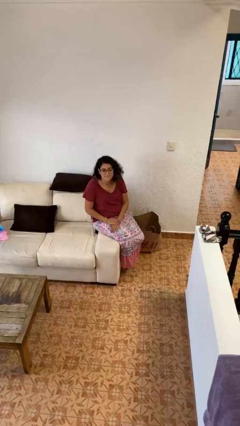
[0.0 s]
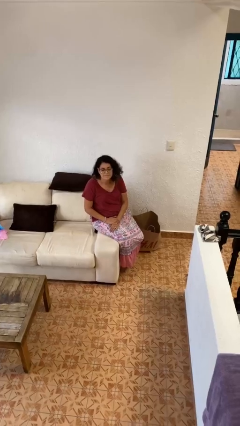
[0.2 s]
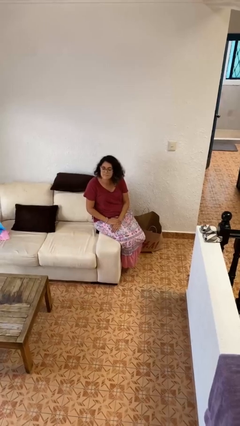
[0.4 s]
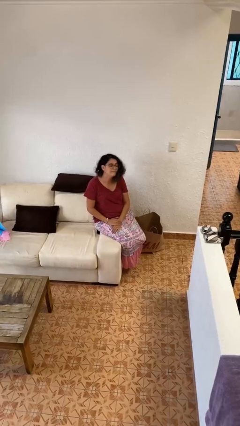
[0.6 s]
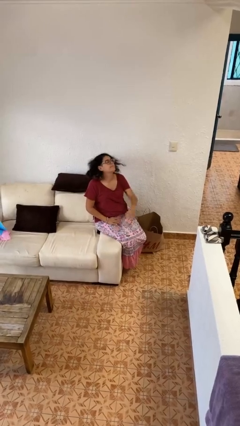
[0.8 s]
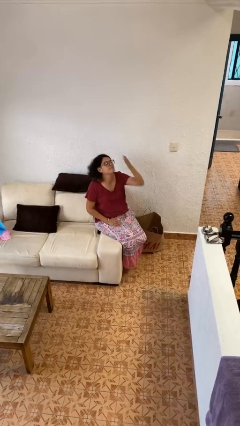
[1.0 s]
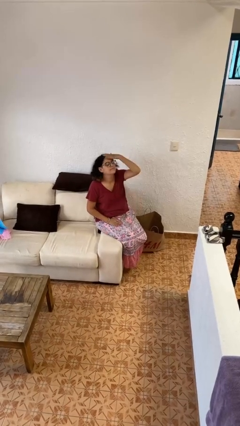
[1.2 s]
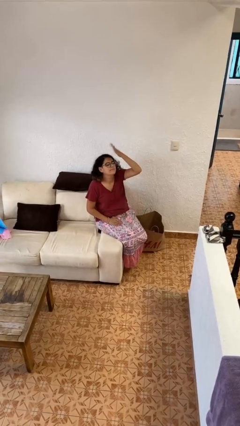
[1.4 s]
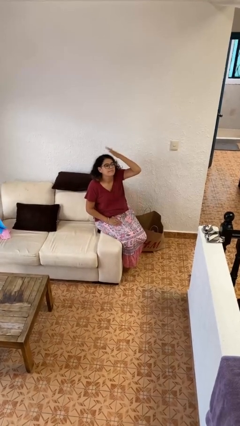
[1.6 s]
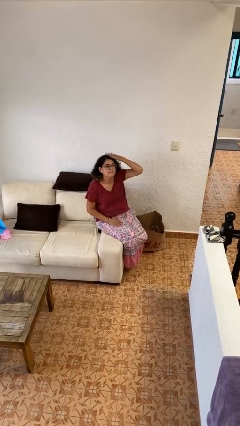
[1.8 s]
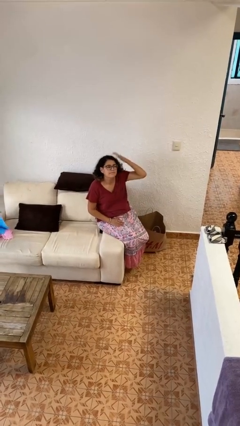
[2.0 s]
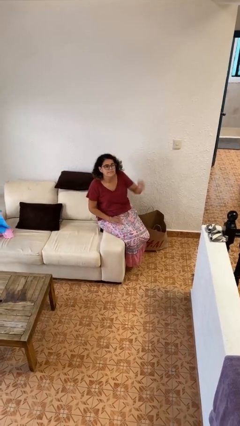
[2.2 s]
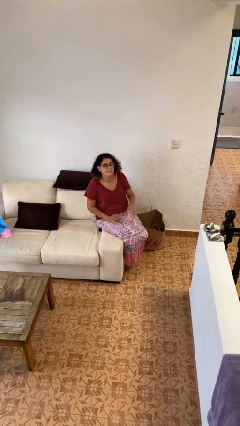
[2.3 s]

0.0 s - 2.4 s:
person pats head

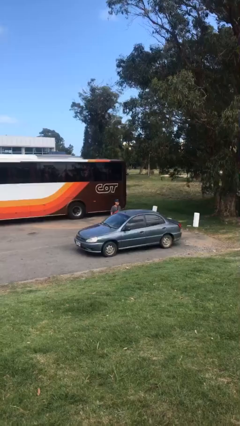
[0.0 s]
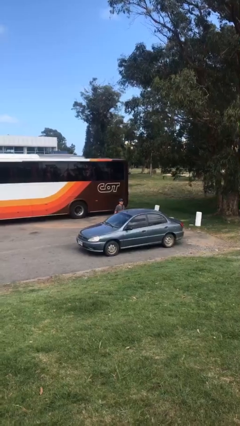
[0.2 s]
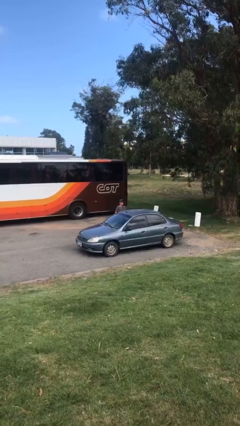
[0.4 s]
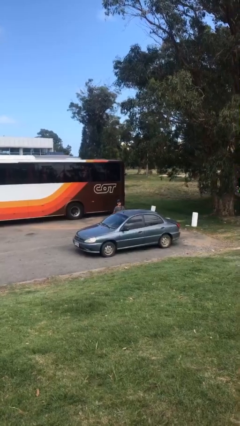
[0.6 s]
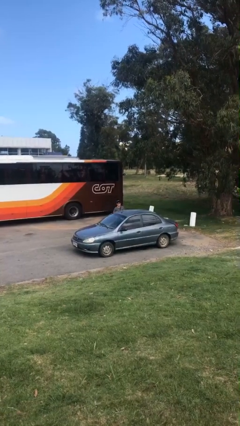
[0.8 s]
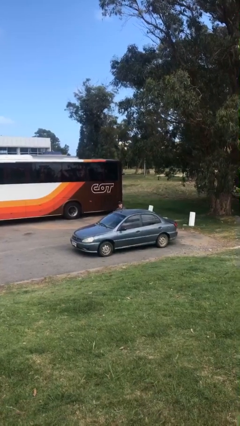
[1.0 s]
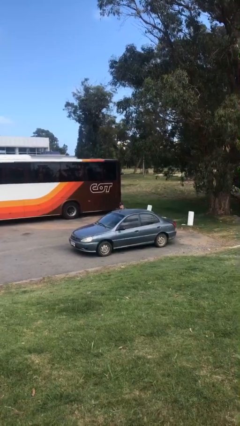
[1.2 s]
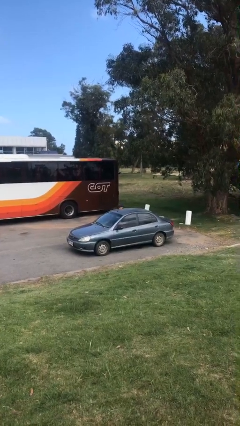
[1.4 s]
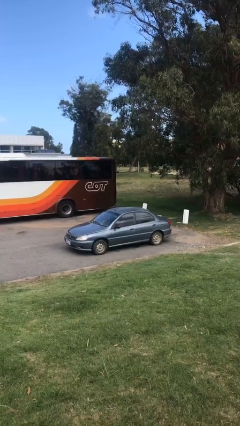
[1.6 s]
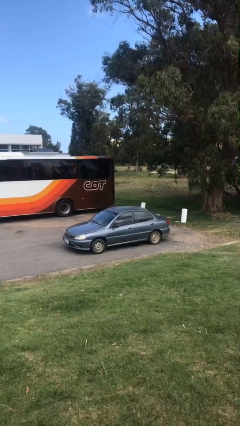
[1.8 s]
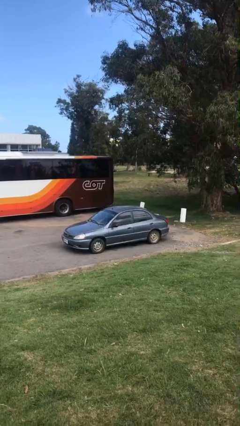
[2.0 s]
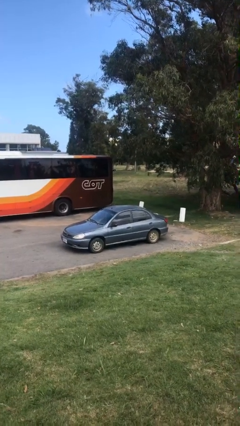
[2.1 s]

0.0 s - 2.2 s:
person enters car

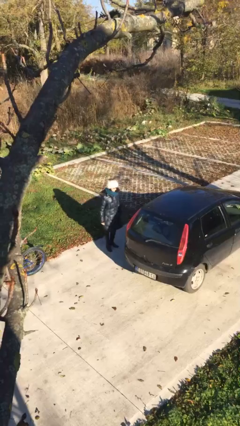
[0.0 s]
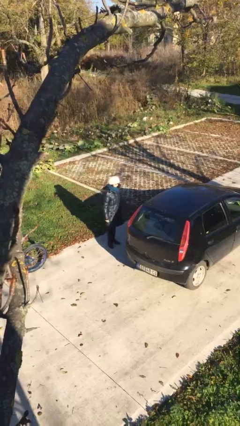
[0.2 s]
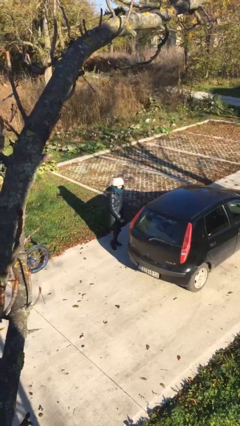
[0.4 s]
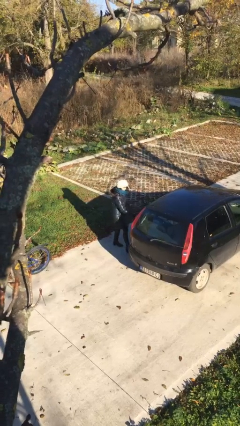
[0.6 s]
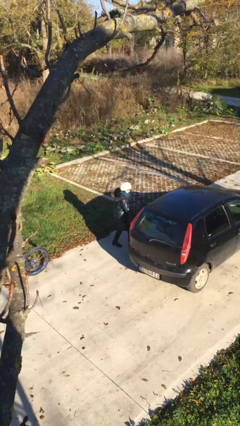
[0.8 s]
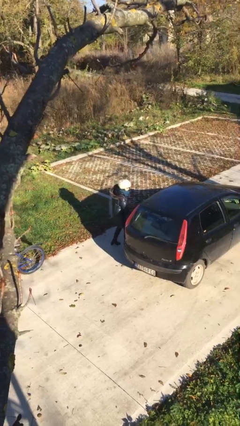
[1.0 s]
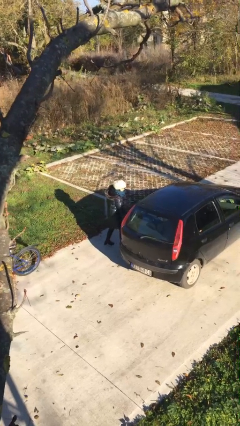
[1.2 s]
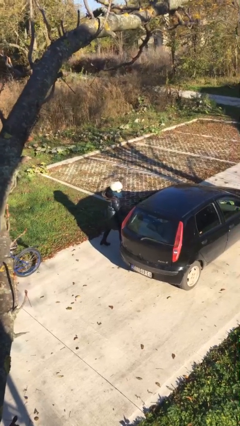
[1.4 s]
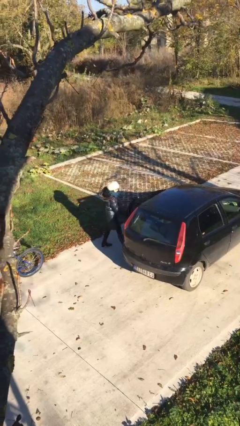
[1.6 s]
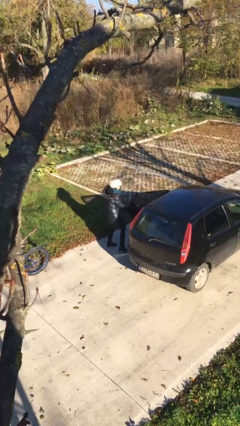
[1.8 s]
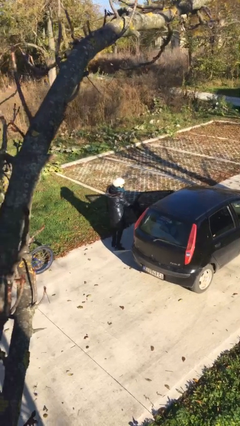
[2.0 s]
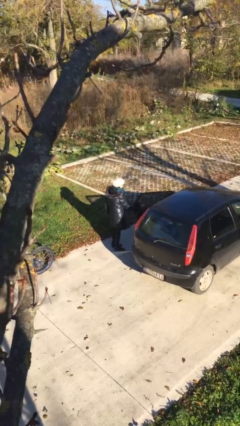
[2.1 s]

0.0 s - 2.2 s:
person opens car door

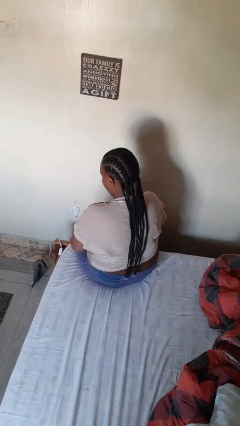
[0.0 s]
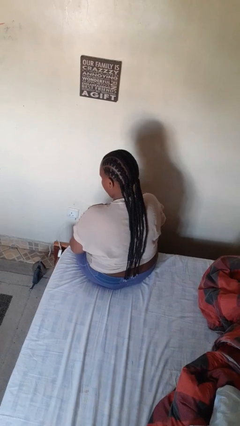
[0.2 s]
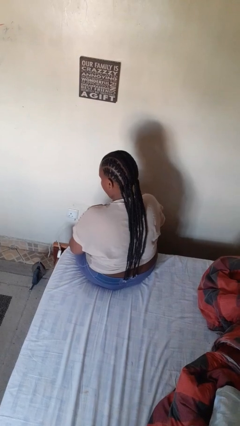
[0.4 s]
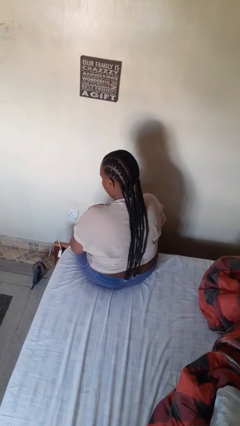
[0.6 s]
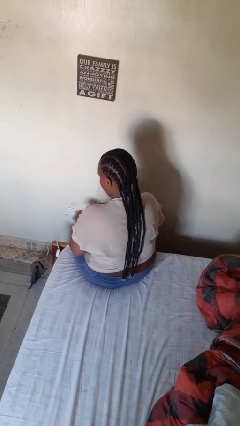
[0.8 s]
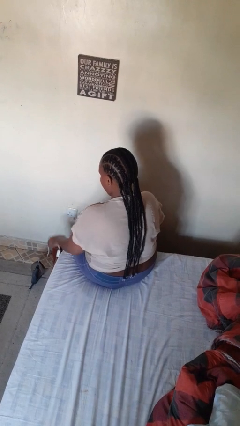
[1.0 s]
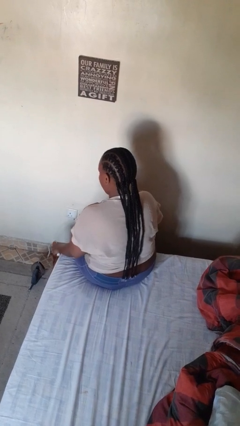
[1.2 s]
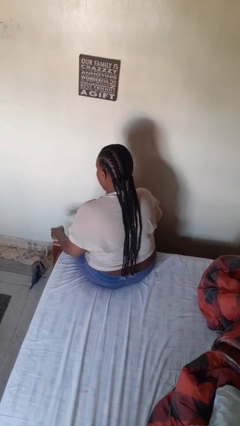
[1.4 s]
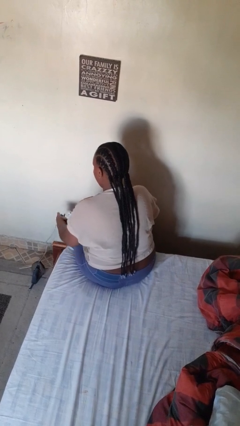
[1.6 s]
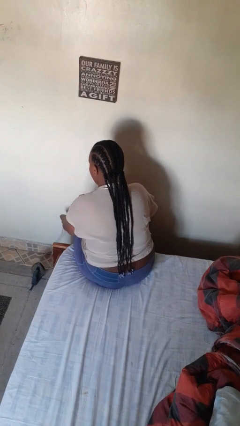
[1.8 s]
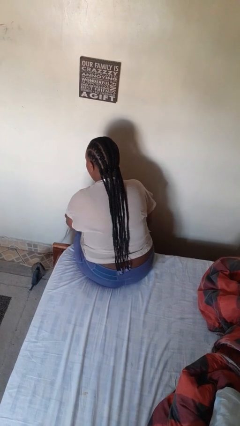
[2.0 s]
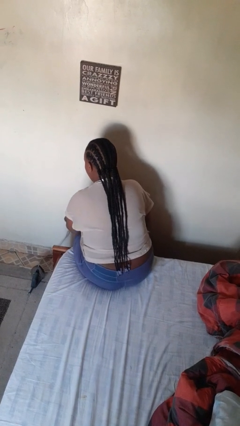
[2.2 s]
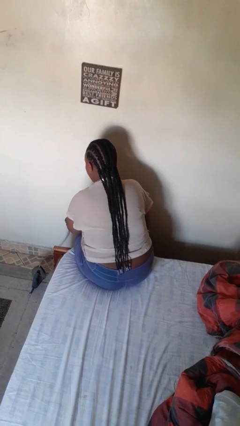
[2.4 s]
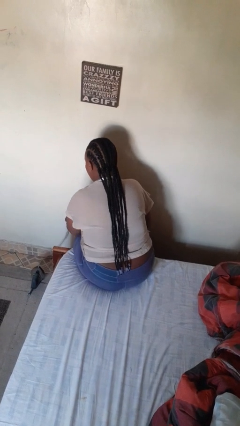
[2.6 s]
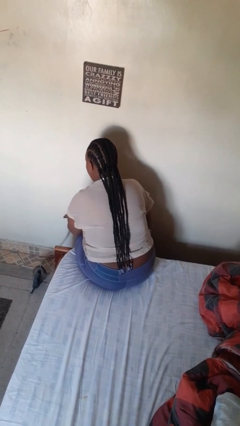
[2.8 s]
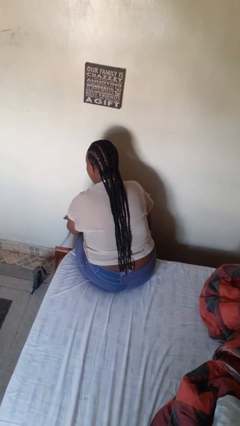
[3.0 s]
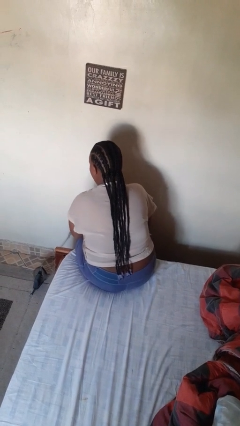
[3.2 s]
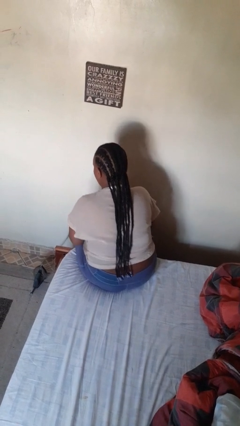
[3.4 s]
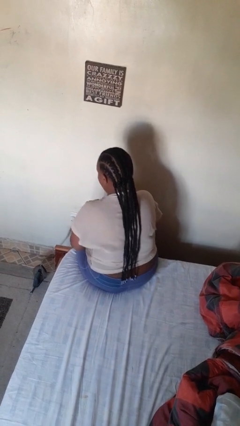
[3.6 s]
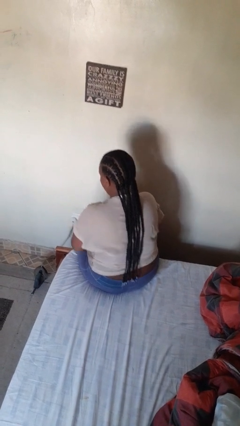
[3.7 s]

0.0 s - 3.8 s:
person plugs into electrical socket

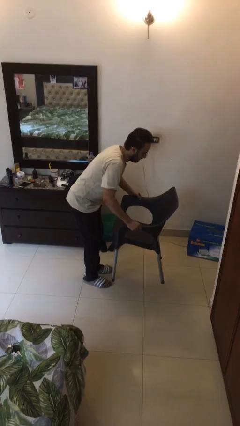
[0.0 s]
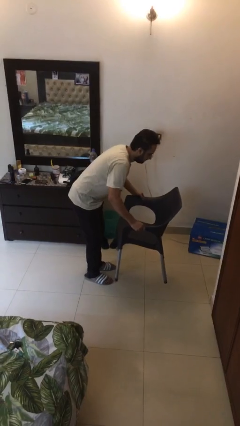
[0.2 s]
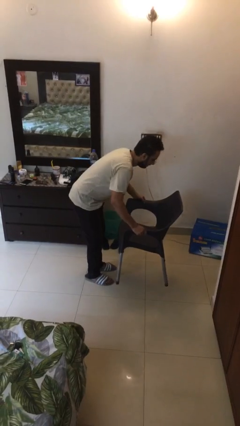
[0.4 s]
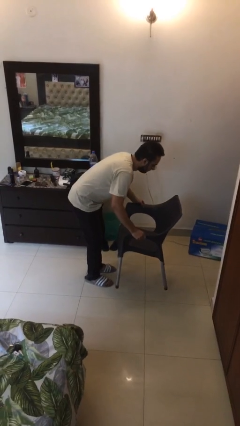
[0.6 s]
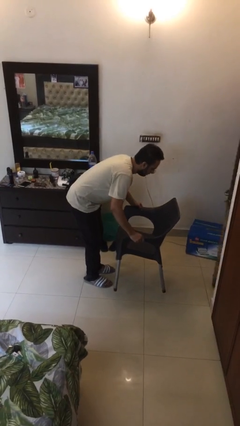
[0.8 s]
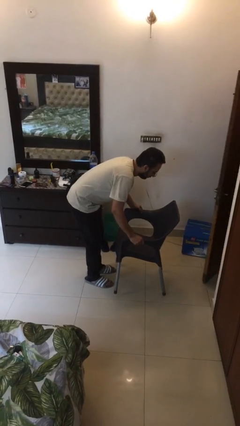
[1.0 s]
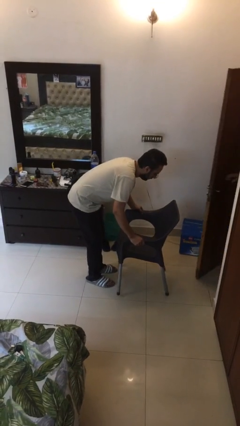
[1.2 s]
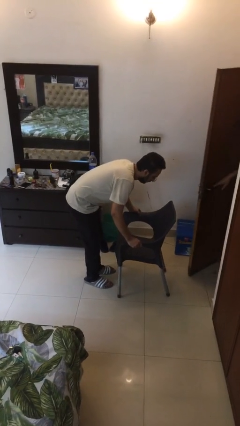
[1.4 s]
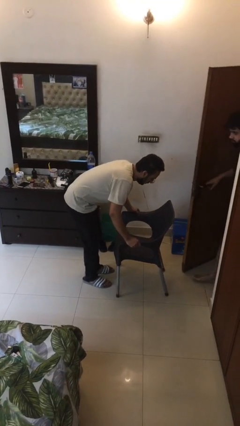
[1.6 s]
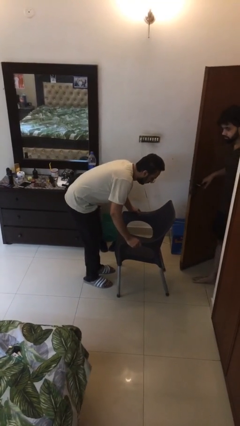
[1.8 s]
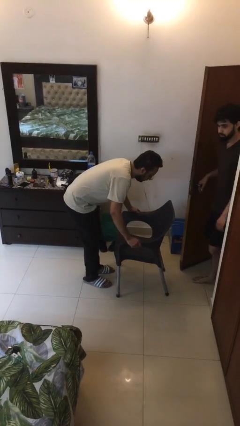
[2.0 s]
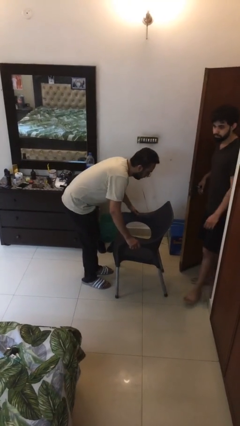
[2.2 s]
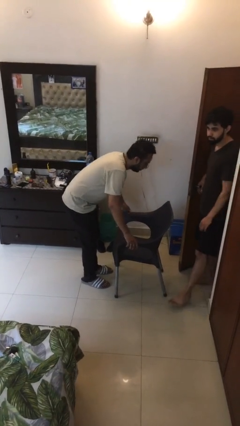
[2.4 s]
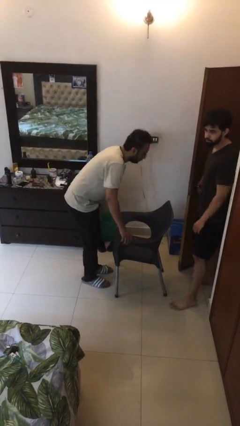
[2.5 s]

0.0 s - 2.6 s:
person puts down object on floor

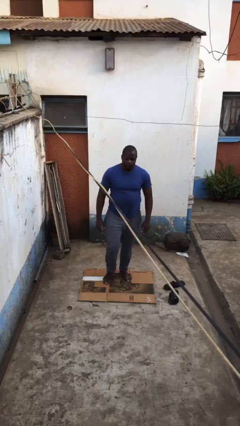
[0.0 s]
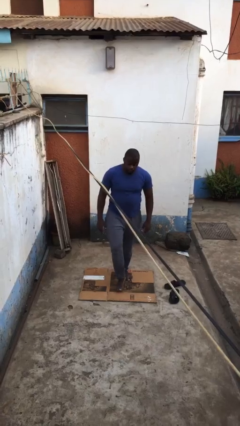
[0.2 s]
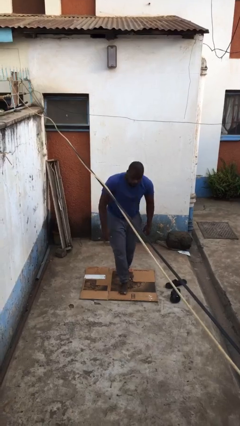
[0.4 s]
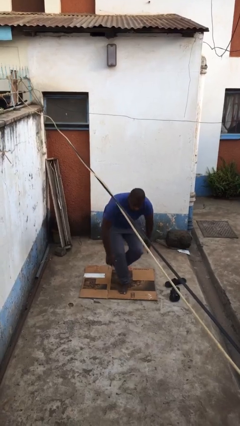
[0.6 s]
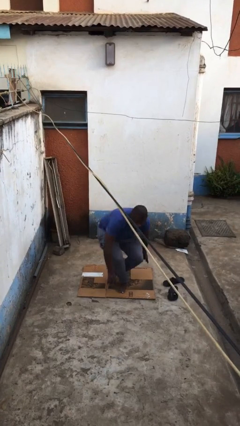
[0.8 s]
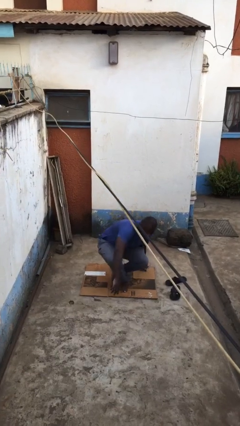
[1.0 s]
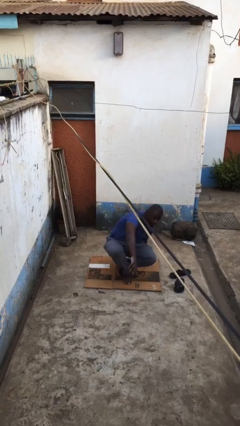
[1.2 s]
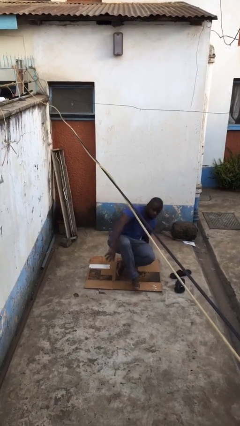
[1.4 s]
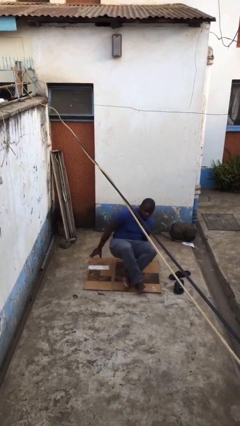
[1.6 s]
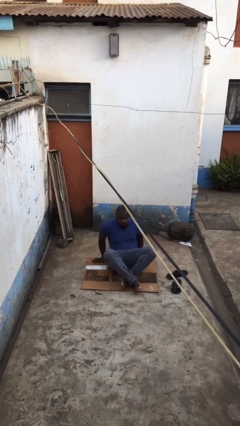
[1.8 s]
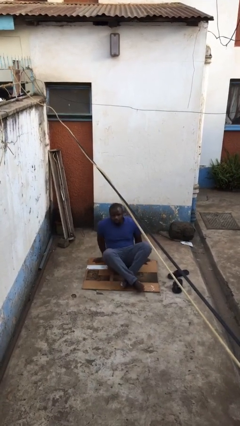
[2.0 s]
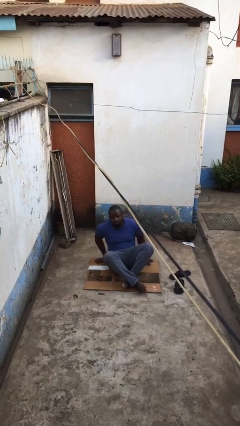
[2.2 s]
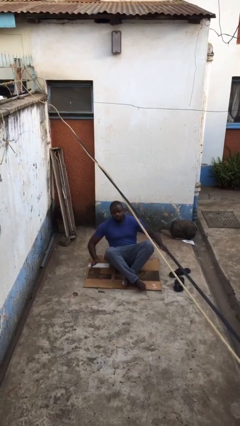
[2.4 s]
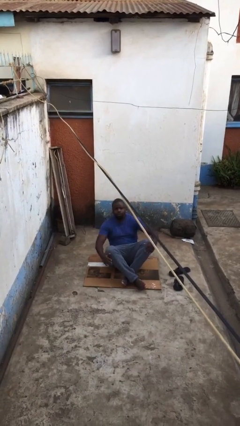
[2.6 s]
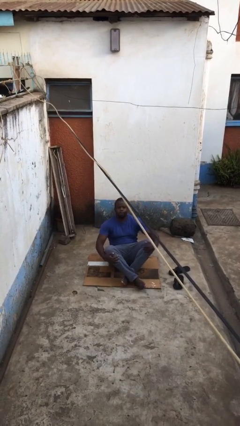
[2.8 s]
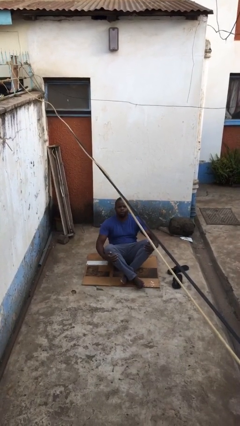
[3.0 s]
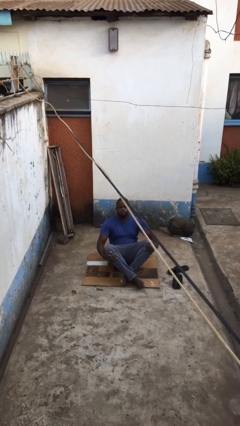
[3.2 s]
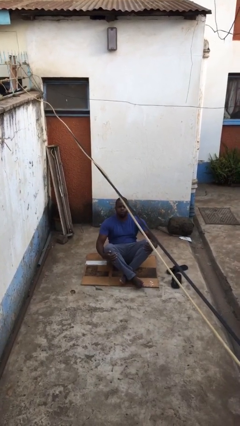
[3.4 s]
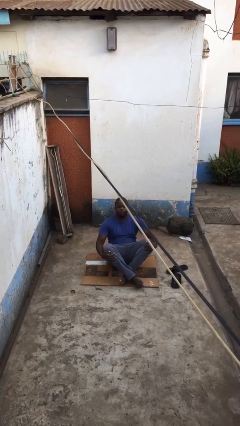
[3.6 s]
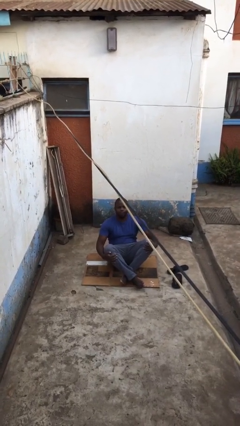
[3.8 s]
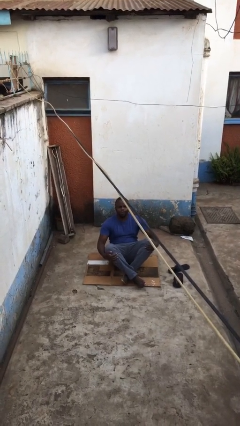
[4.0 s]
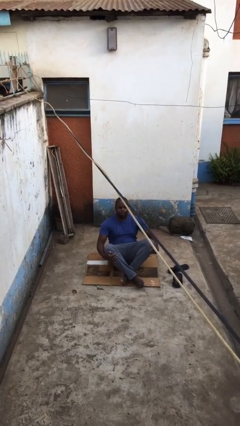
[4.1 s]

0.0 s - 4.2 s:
person sits crisscross
